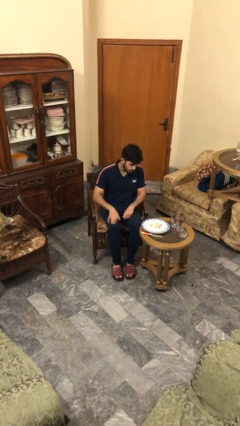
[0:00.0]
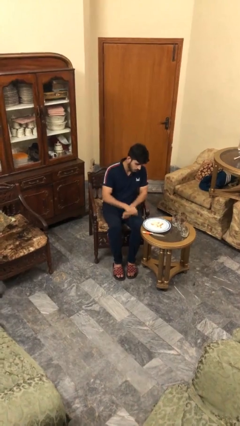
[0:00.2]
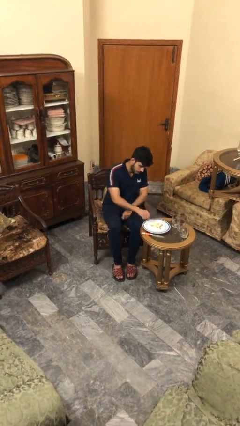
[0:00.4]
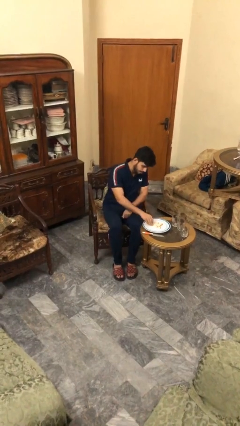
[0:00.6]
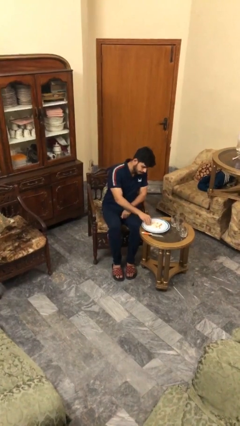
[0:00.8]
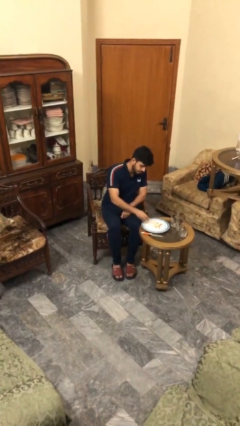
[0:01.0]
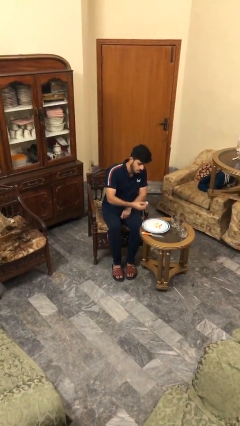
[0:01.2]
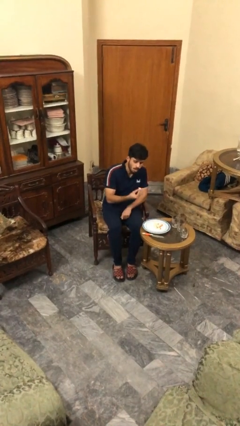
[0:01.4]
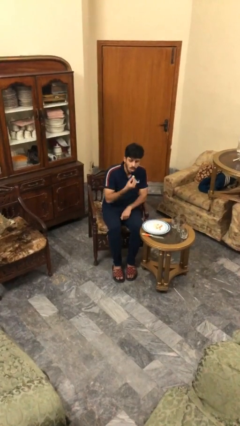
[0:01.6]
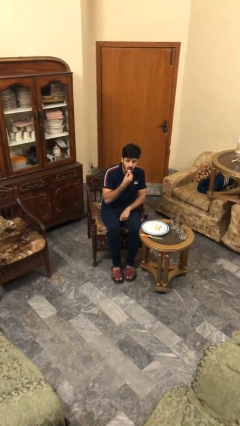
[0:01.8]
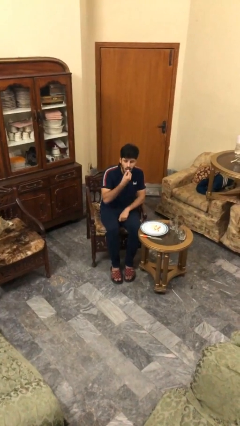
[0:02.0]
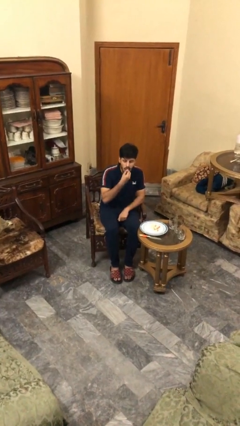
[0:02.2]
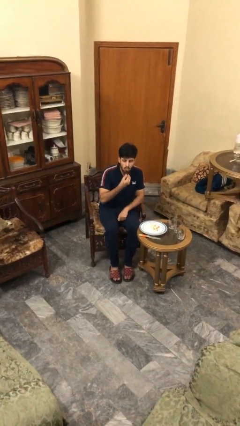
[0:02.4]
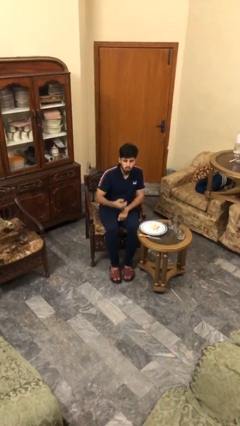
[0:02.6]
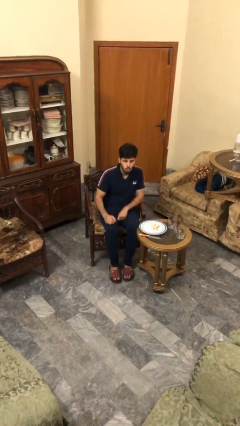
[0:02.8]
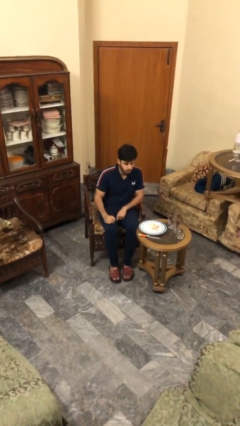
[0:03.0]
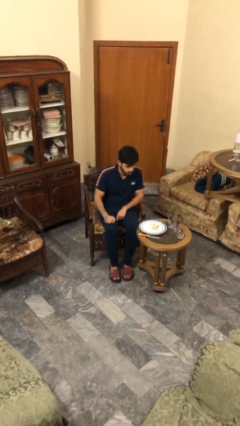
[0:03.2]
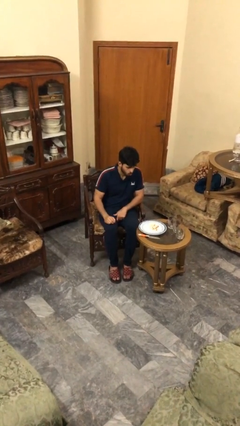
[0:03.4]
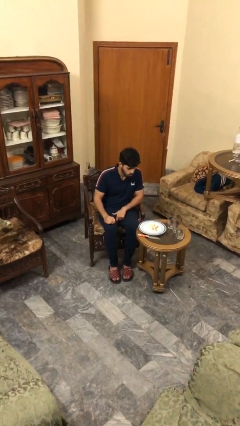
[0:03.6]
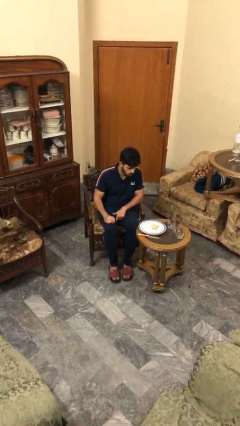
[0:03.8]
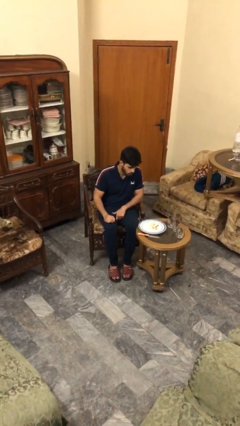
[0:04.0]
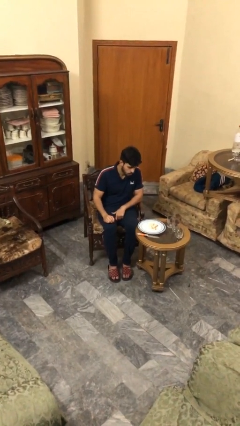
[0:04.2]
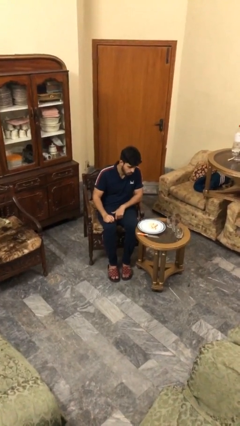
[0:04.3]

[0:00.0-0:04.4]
person eats with hands

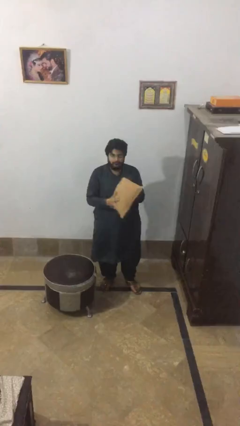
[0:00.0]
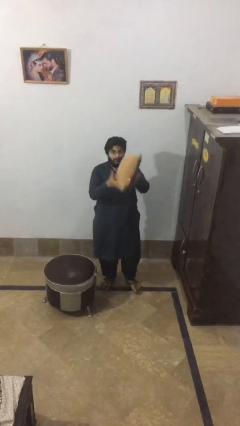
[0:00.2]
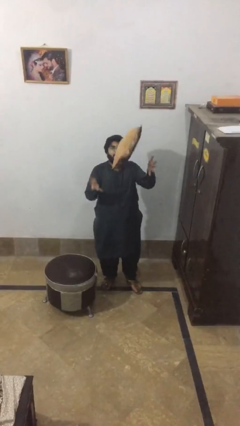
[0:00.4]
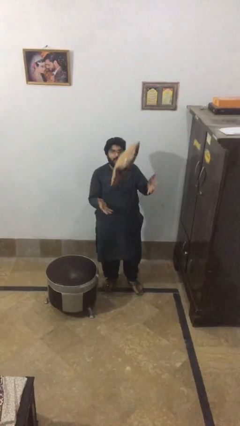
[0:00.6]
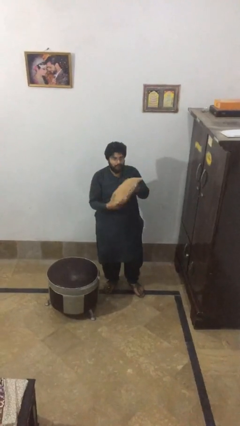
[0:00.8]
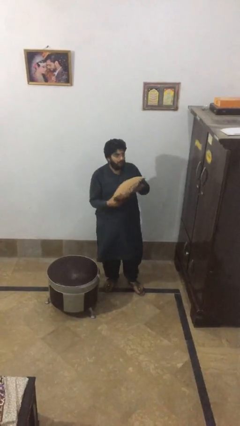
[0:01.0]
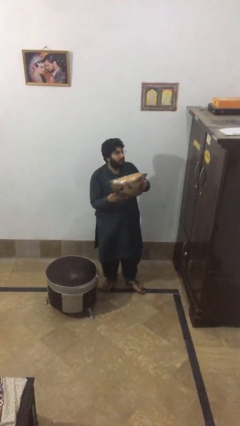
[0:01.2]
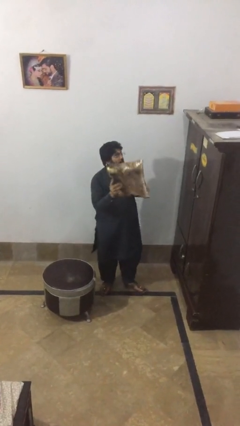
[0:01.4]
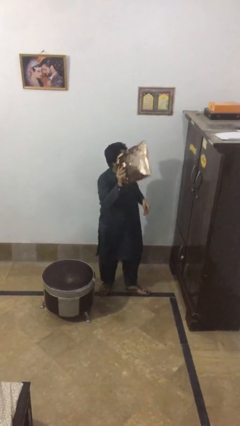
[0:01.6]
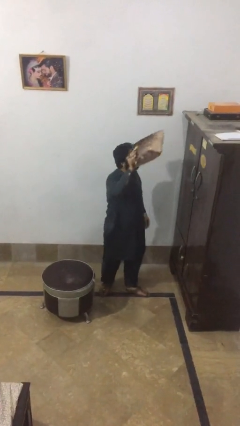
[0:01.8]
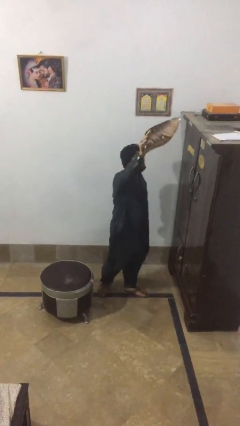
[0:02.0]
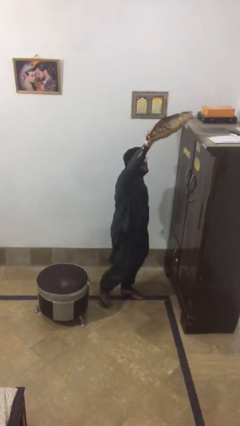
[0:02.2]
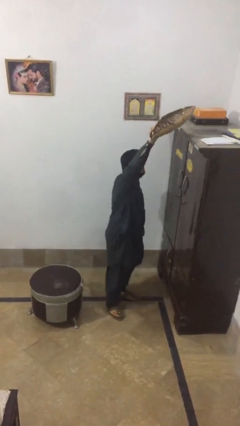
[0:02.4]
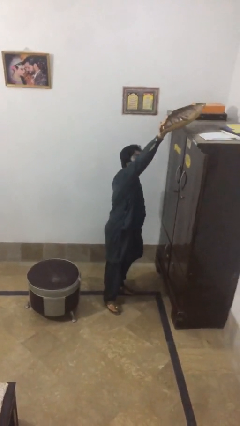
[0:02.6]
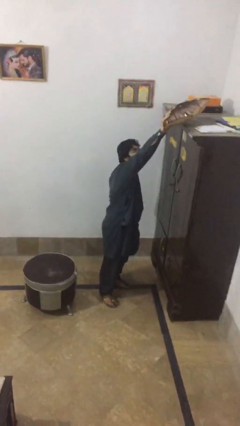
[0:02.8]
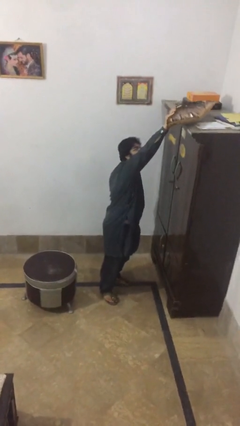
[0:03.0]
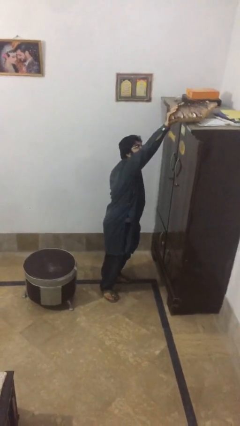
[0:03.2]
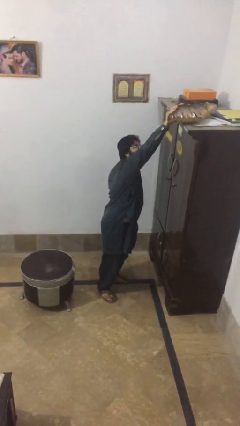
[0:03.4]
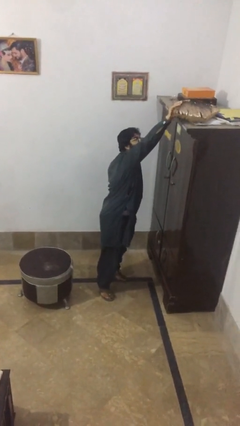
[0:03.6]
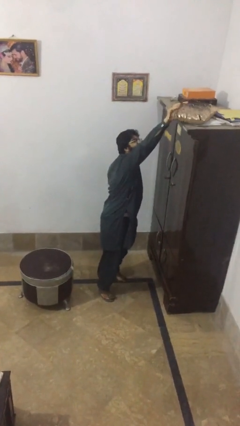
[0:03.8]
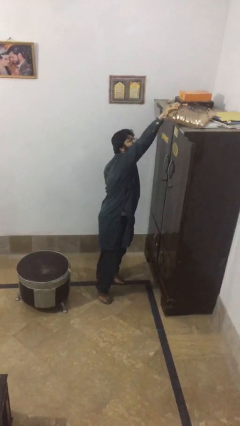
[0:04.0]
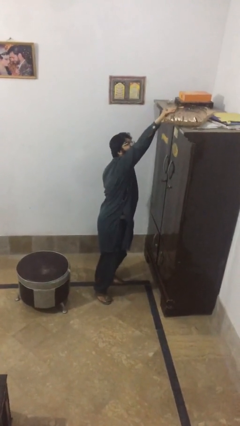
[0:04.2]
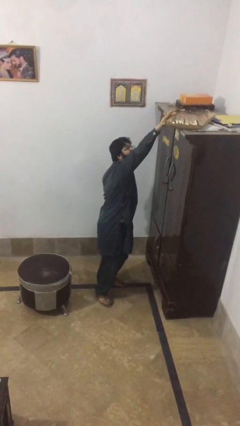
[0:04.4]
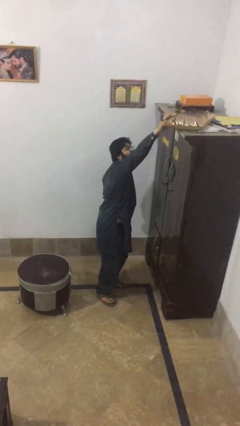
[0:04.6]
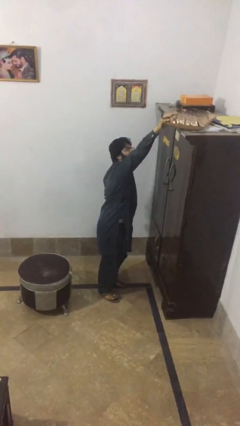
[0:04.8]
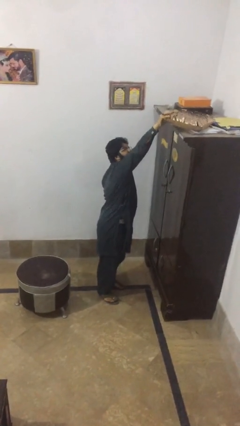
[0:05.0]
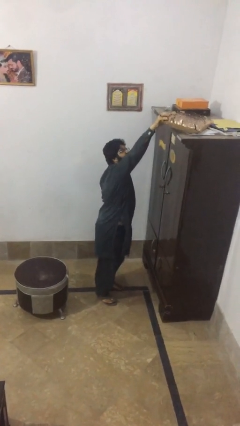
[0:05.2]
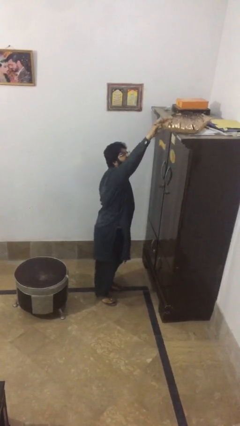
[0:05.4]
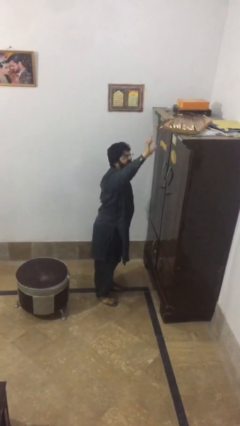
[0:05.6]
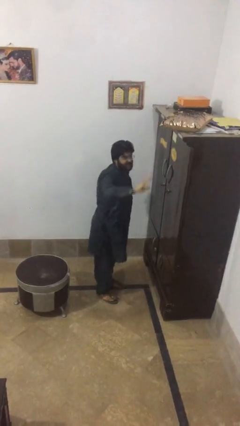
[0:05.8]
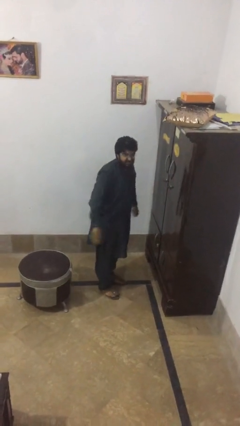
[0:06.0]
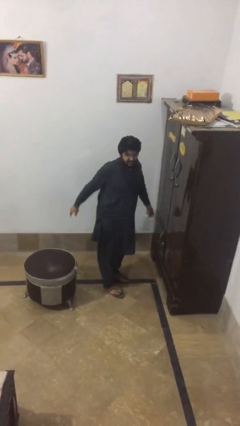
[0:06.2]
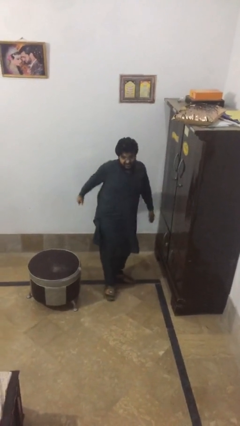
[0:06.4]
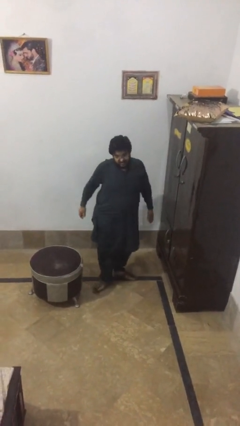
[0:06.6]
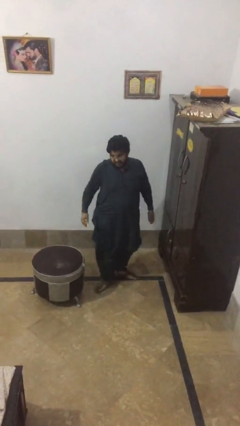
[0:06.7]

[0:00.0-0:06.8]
person puts down object on shelf

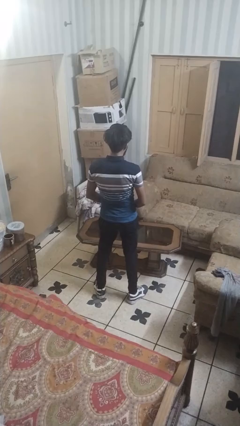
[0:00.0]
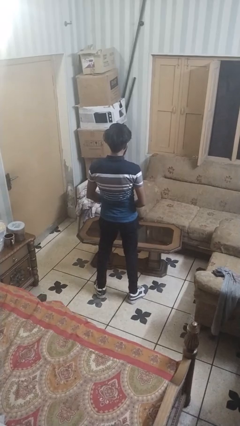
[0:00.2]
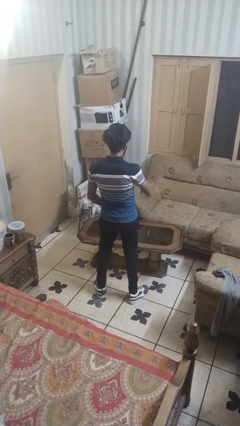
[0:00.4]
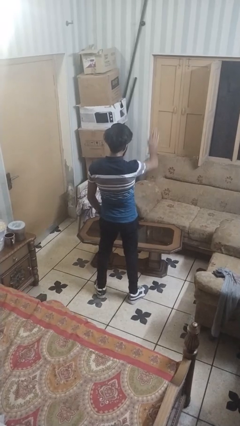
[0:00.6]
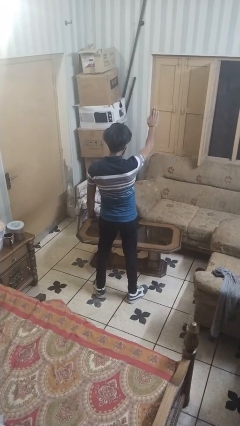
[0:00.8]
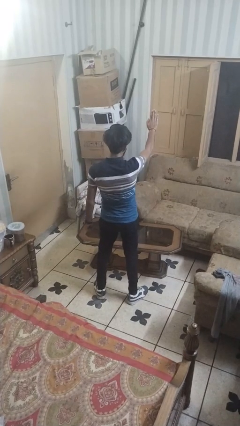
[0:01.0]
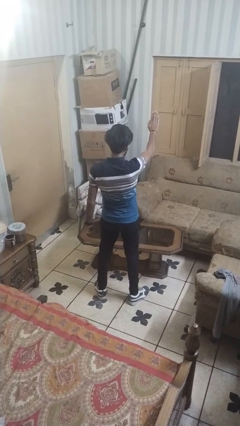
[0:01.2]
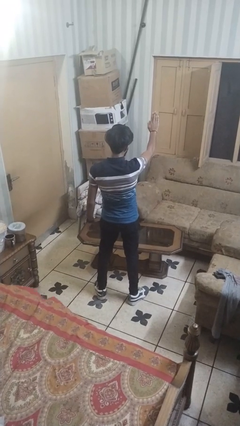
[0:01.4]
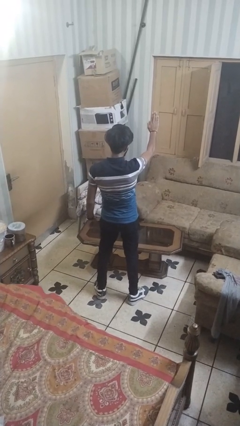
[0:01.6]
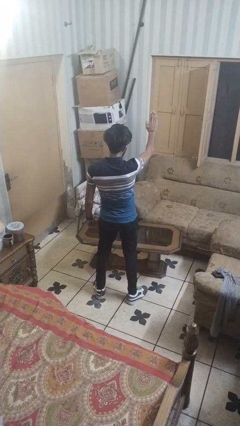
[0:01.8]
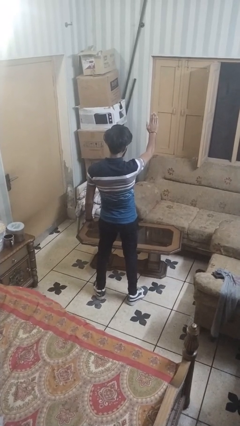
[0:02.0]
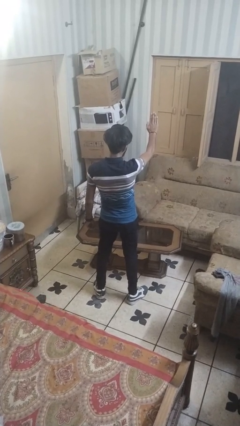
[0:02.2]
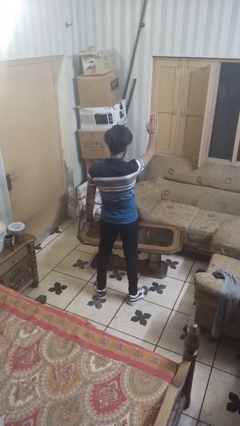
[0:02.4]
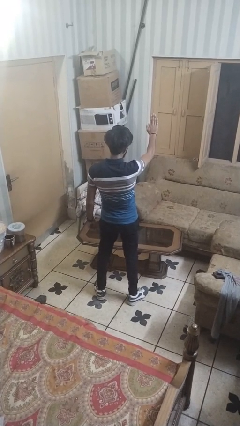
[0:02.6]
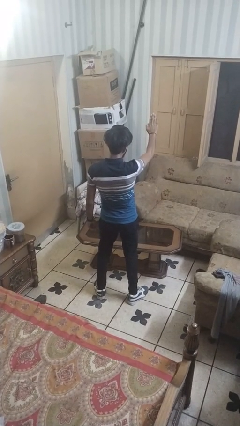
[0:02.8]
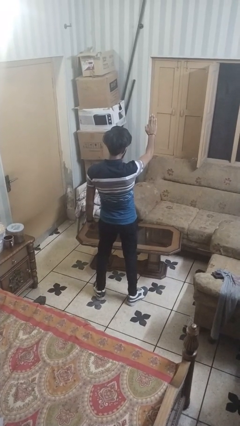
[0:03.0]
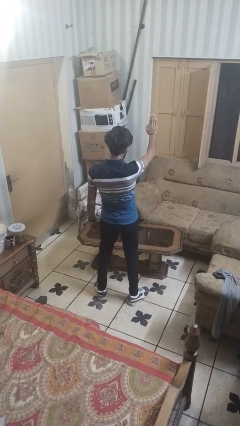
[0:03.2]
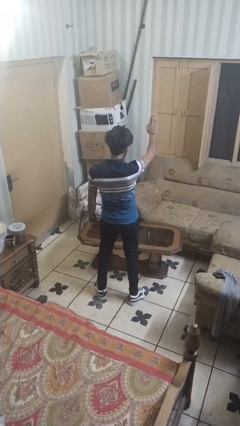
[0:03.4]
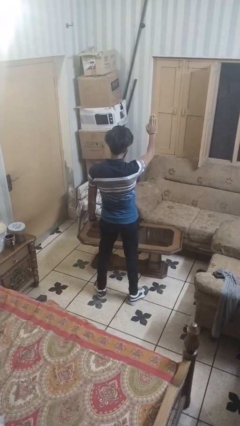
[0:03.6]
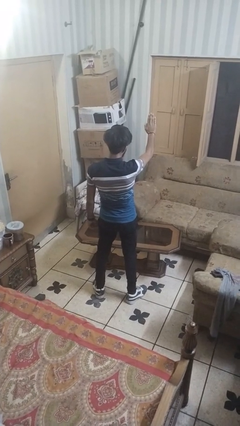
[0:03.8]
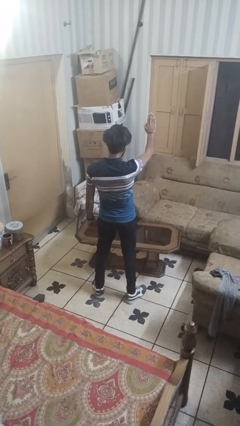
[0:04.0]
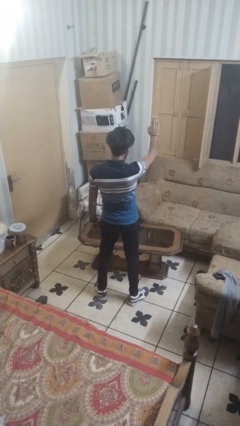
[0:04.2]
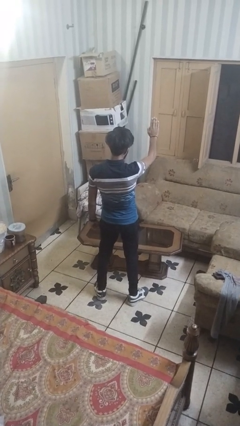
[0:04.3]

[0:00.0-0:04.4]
person gestures stop

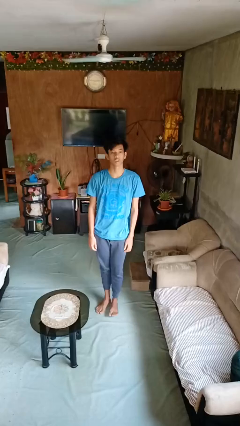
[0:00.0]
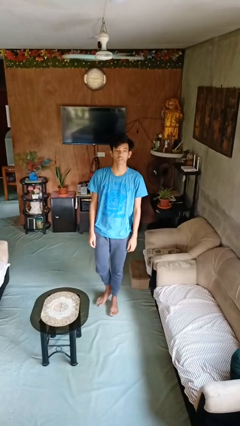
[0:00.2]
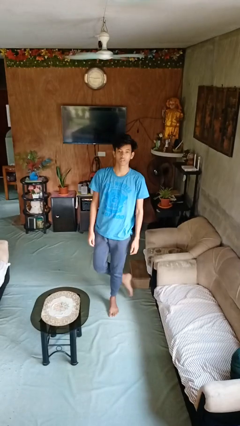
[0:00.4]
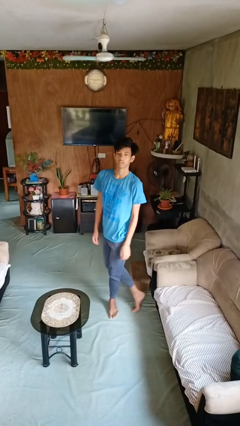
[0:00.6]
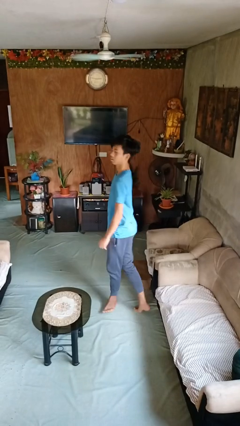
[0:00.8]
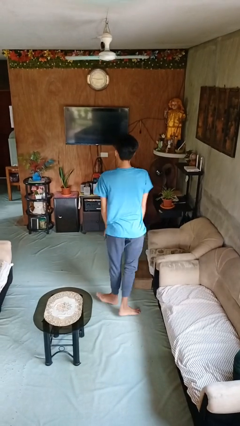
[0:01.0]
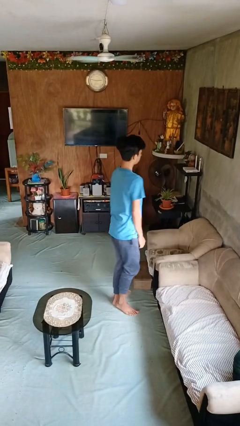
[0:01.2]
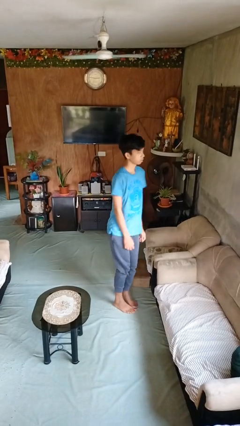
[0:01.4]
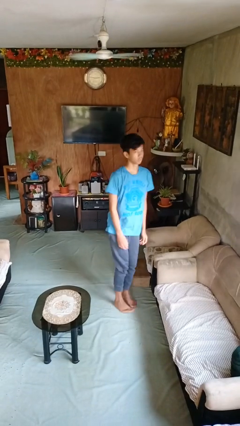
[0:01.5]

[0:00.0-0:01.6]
person twirls

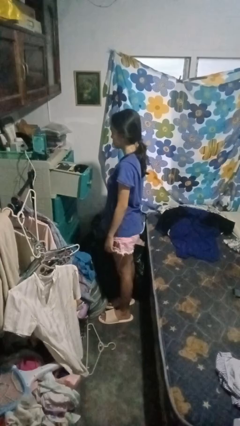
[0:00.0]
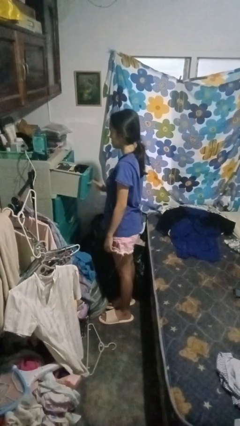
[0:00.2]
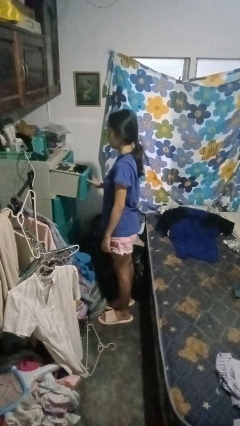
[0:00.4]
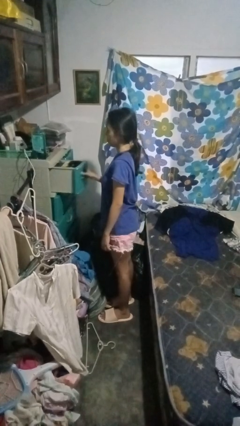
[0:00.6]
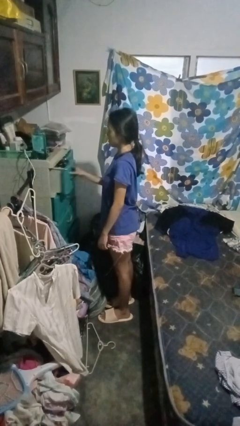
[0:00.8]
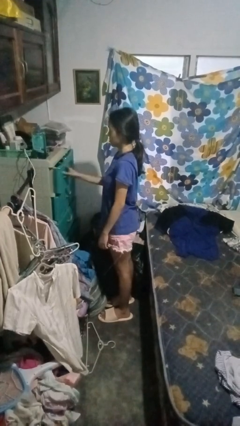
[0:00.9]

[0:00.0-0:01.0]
person closes dresser drawer
